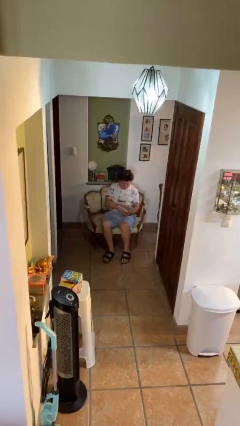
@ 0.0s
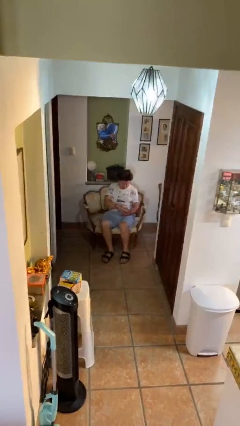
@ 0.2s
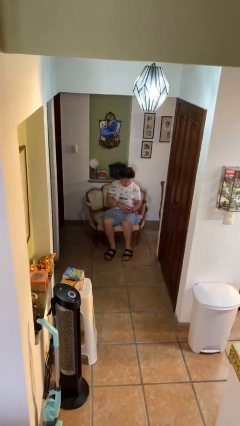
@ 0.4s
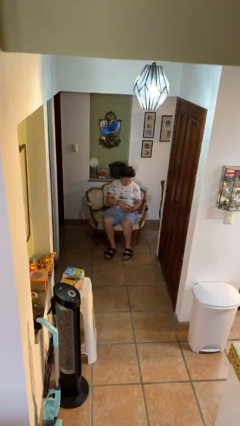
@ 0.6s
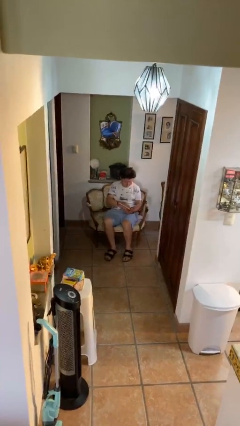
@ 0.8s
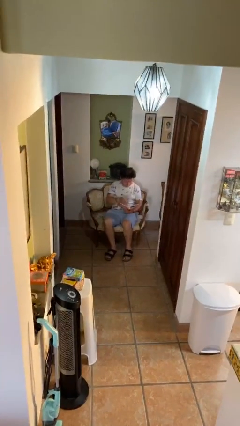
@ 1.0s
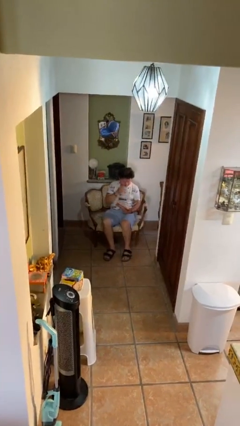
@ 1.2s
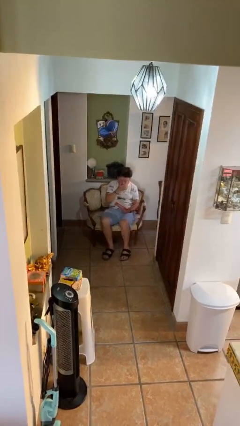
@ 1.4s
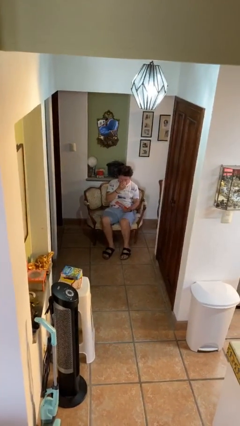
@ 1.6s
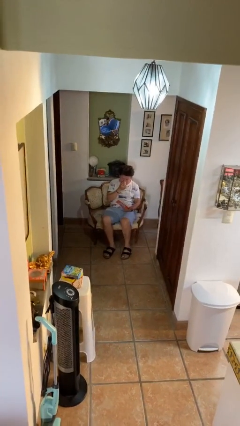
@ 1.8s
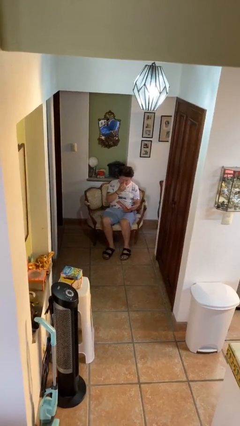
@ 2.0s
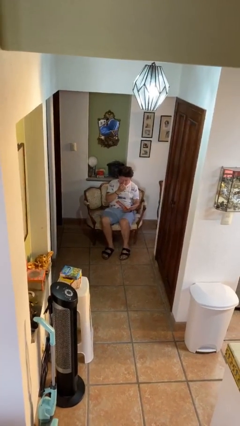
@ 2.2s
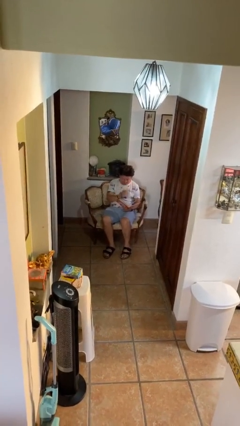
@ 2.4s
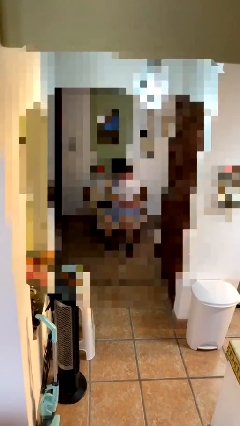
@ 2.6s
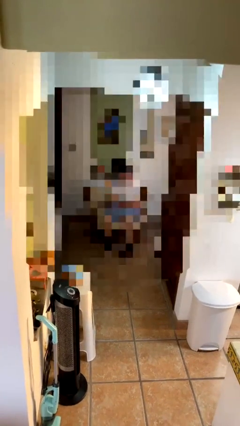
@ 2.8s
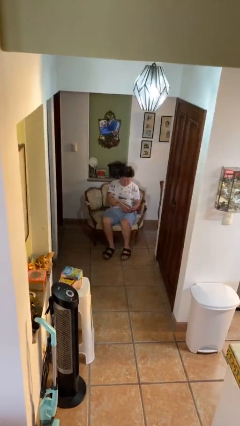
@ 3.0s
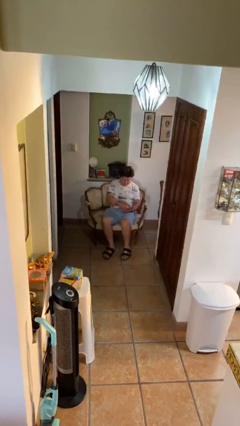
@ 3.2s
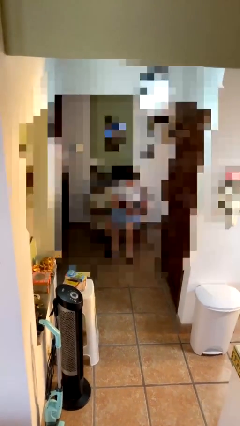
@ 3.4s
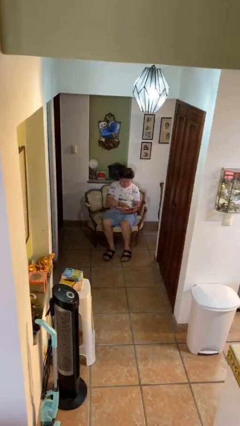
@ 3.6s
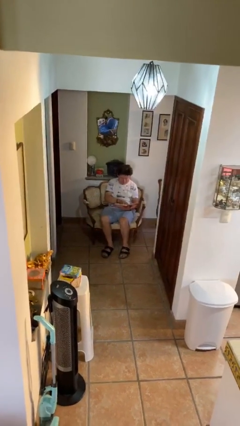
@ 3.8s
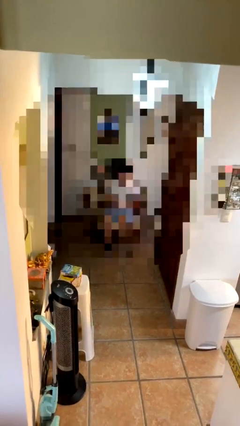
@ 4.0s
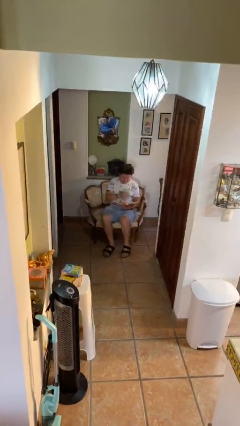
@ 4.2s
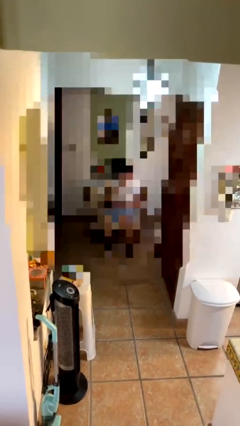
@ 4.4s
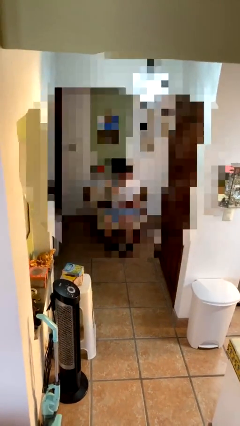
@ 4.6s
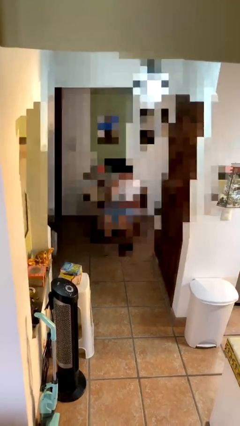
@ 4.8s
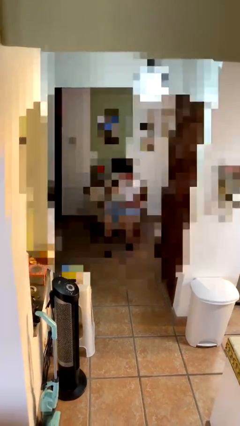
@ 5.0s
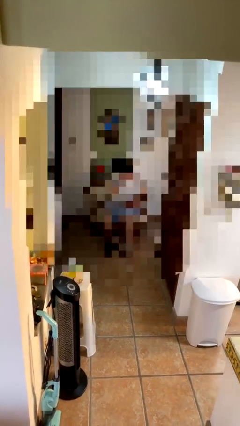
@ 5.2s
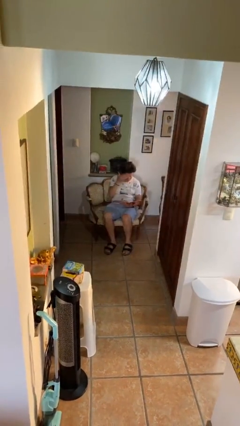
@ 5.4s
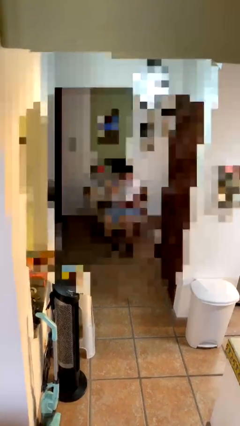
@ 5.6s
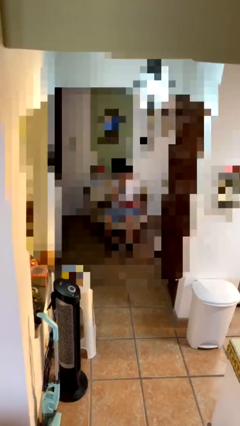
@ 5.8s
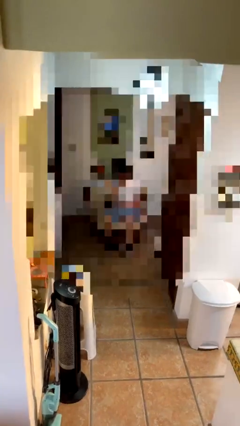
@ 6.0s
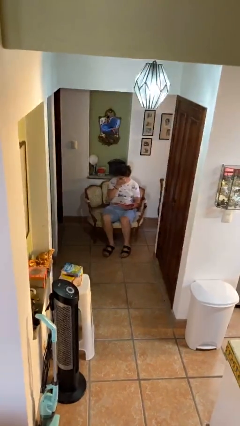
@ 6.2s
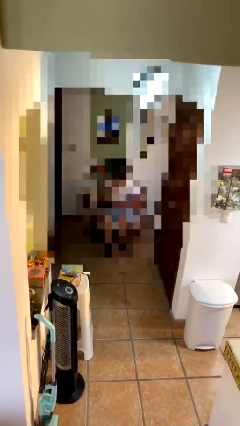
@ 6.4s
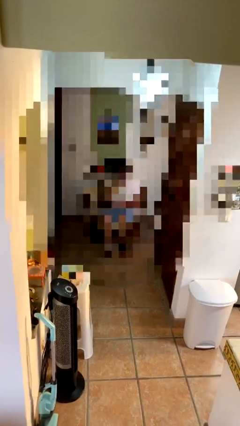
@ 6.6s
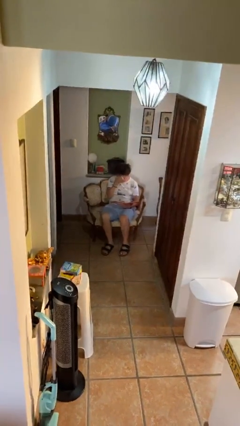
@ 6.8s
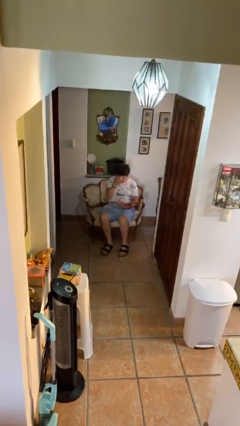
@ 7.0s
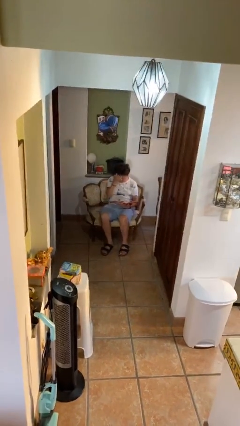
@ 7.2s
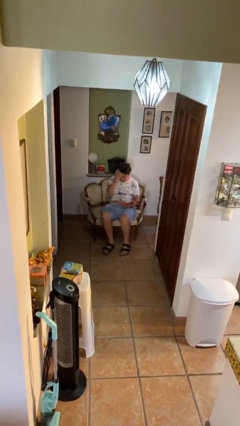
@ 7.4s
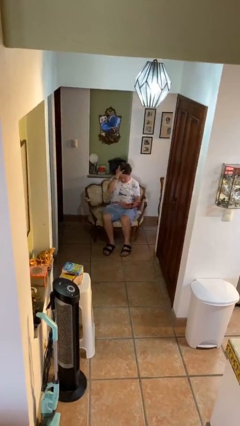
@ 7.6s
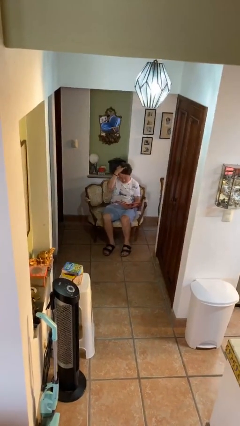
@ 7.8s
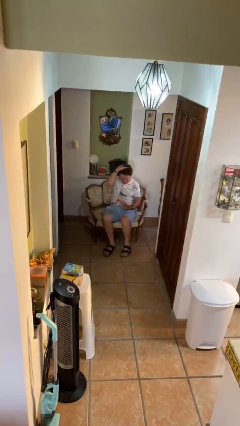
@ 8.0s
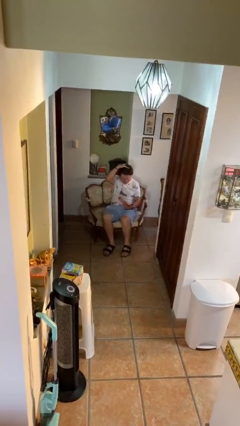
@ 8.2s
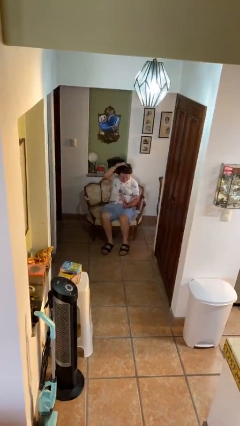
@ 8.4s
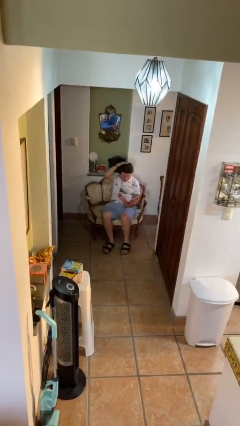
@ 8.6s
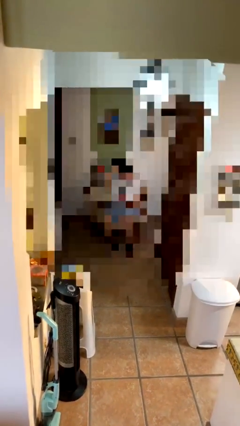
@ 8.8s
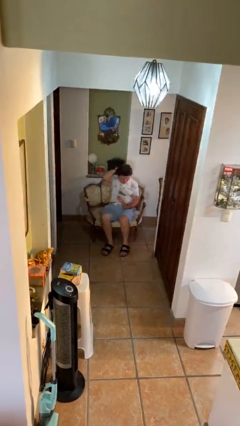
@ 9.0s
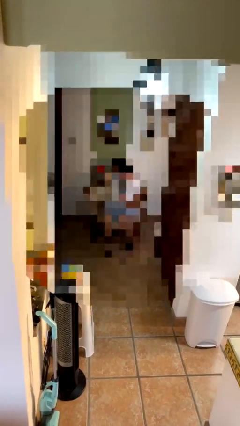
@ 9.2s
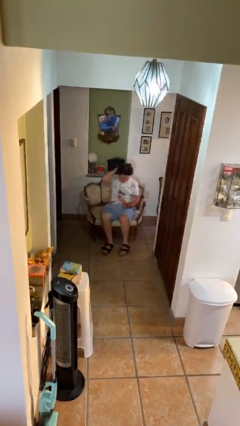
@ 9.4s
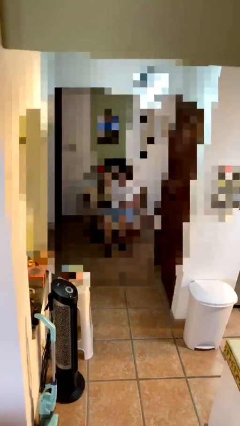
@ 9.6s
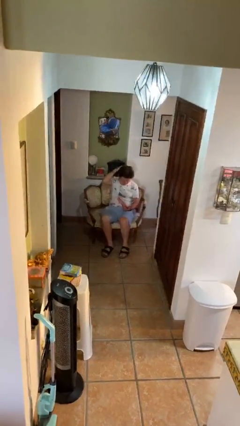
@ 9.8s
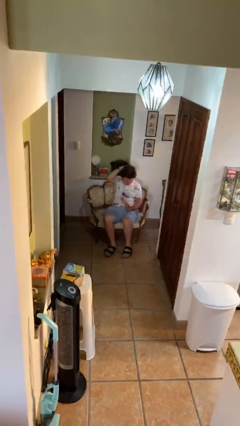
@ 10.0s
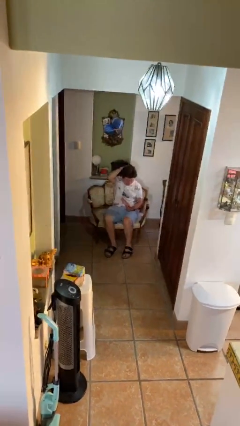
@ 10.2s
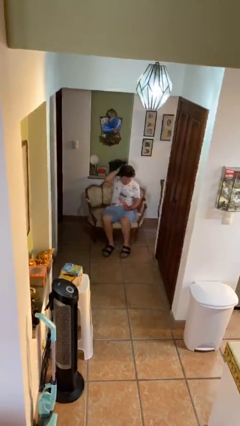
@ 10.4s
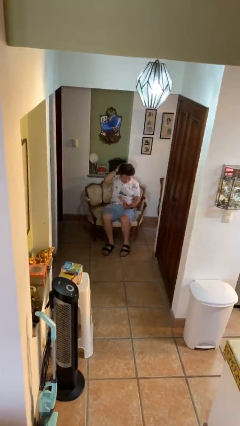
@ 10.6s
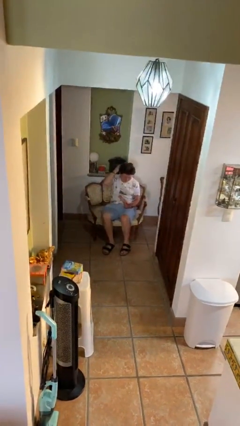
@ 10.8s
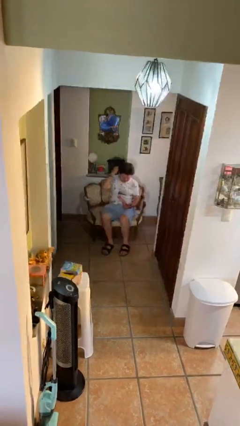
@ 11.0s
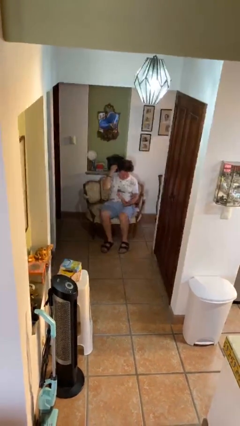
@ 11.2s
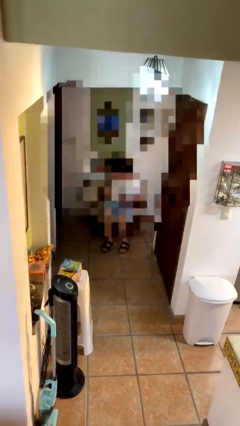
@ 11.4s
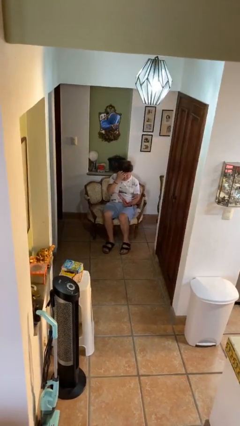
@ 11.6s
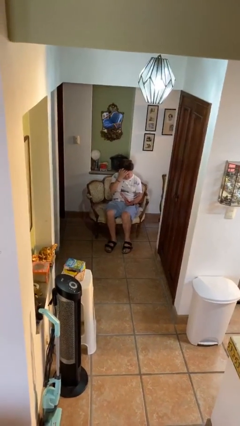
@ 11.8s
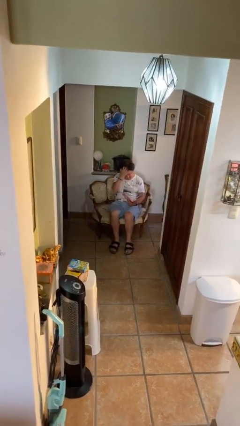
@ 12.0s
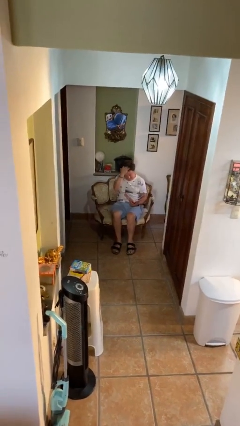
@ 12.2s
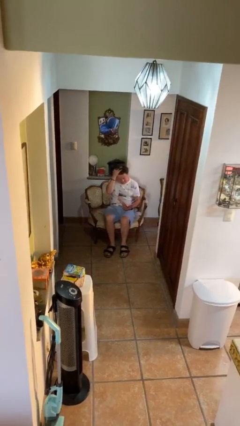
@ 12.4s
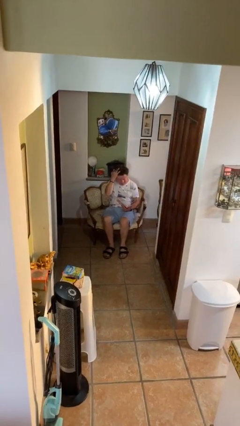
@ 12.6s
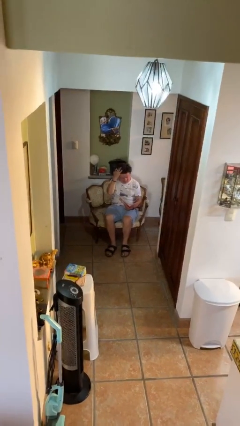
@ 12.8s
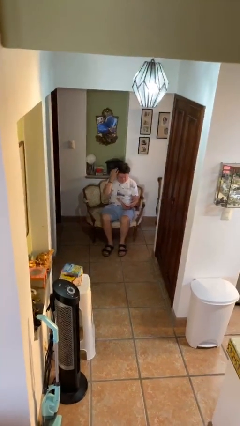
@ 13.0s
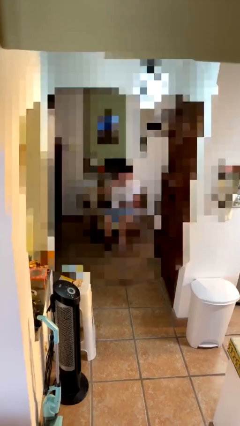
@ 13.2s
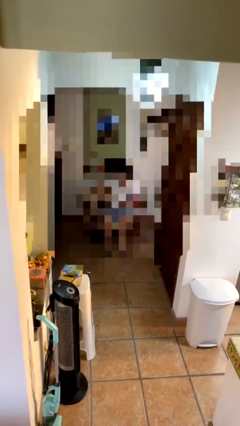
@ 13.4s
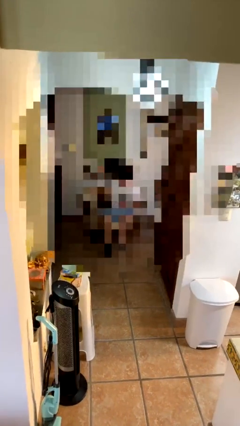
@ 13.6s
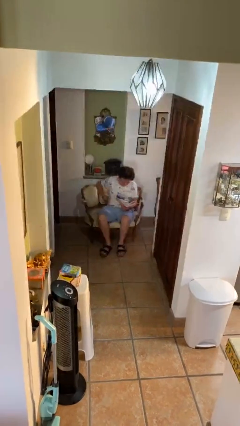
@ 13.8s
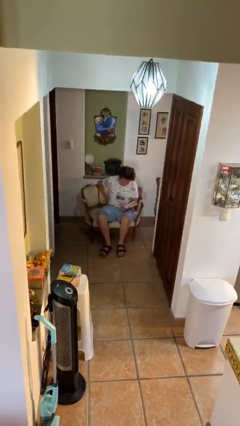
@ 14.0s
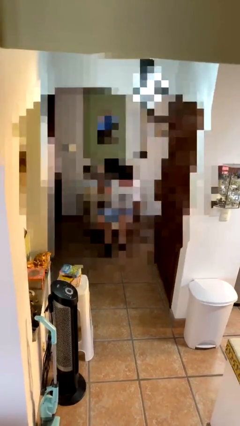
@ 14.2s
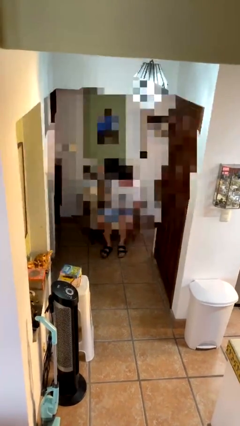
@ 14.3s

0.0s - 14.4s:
person reads document

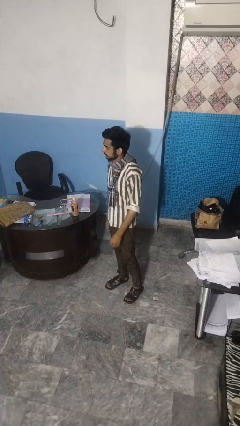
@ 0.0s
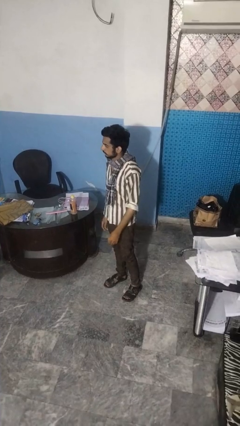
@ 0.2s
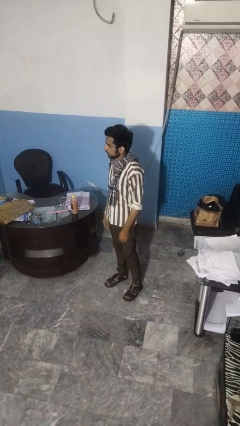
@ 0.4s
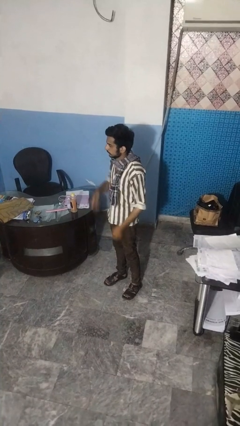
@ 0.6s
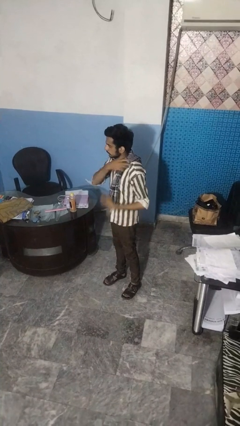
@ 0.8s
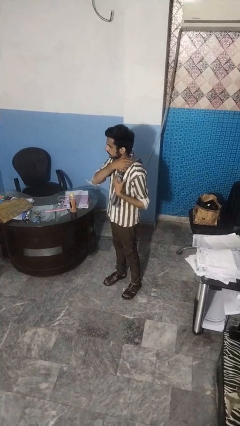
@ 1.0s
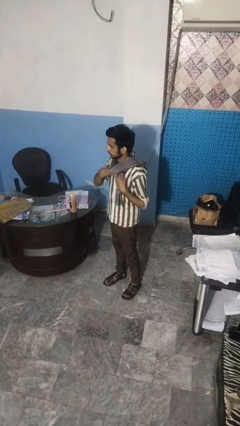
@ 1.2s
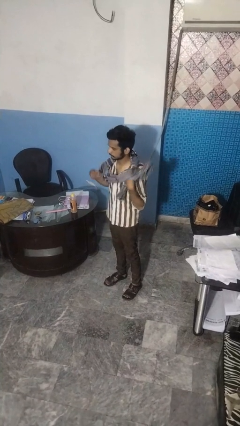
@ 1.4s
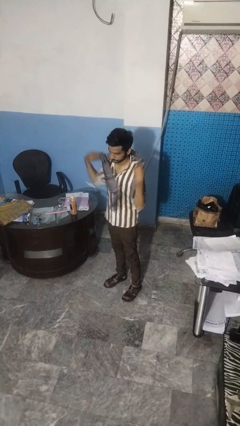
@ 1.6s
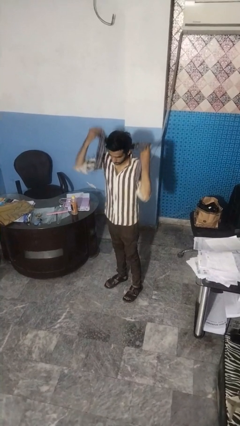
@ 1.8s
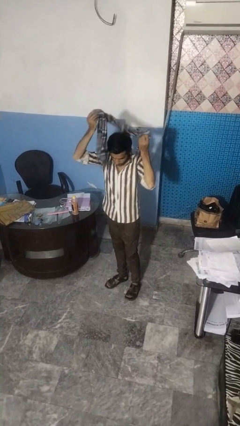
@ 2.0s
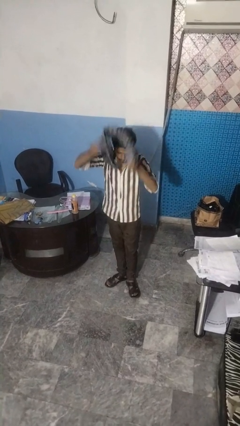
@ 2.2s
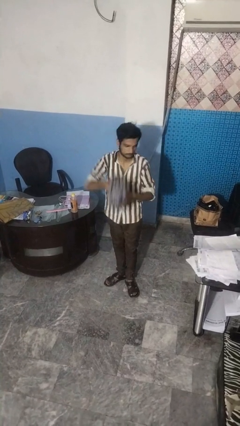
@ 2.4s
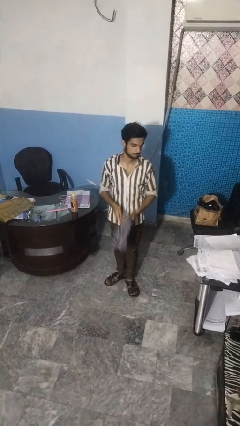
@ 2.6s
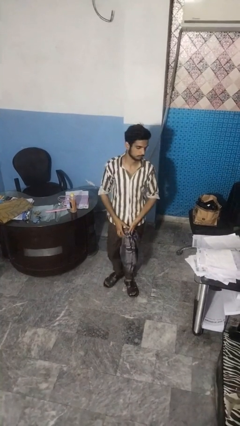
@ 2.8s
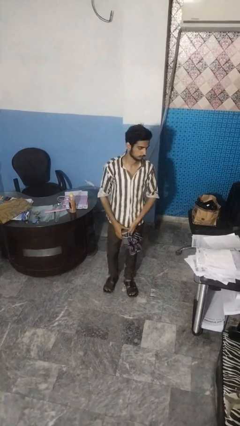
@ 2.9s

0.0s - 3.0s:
person takes off scarf

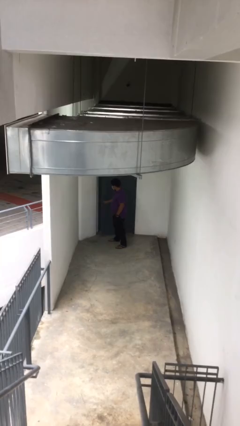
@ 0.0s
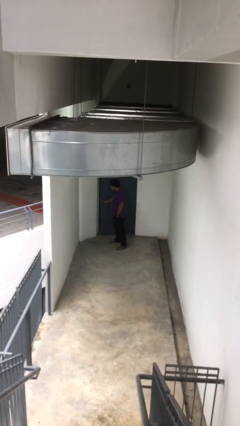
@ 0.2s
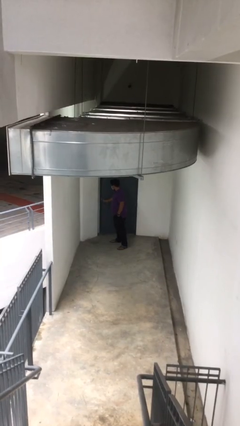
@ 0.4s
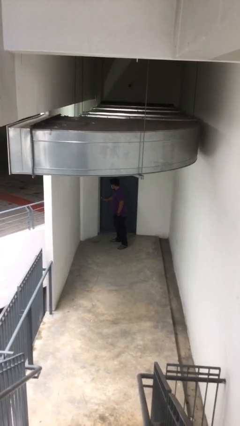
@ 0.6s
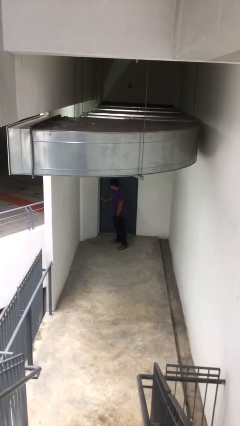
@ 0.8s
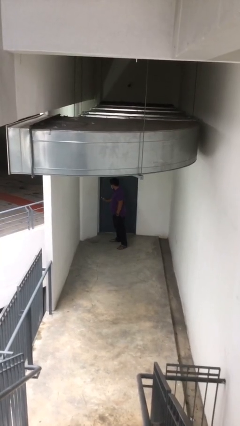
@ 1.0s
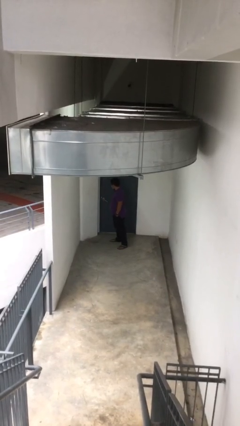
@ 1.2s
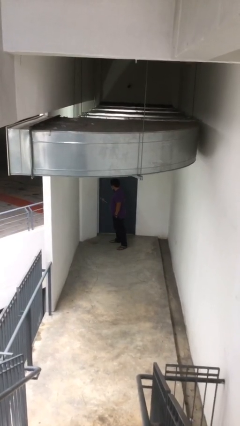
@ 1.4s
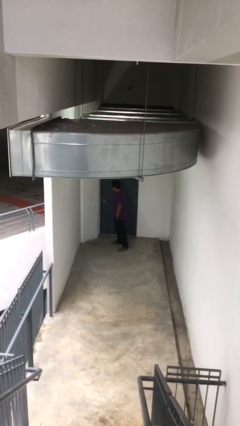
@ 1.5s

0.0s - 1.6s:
person closes facility door
